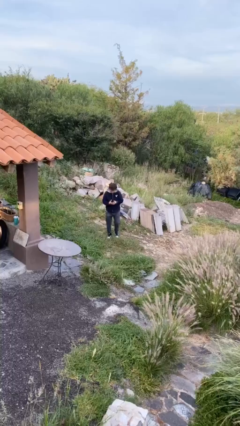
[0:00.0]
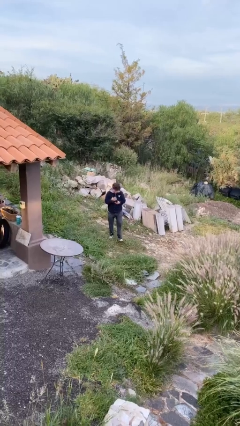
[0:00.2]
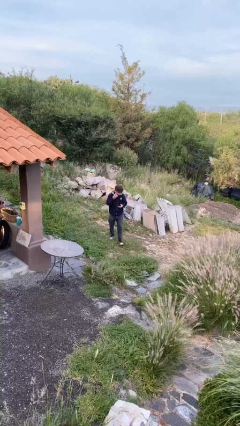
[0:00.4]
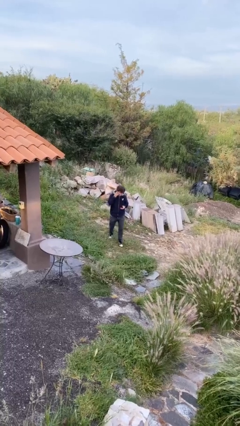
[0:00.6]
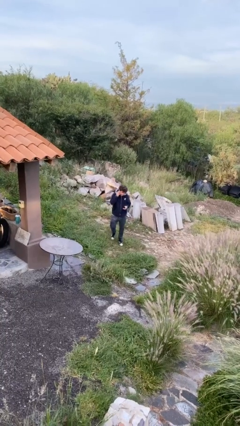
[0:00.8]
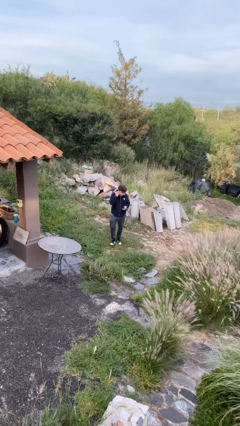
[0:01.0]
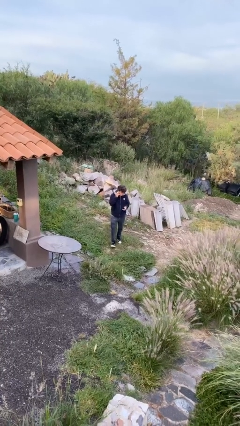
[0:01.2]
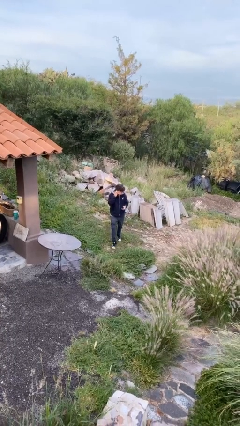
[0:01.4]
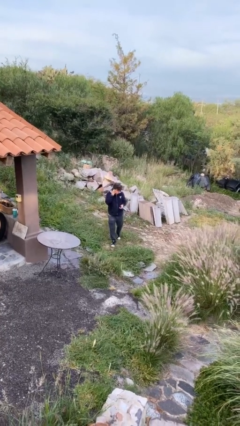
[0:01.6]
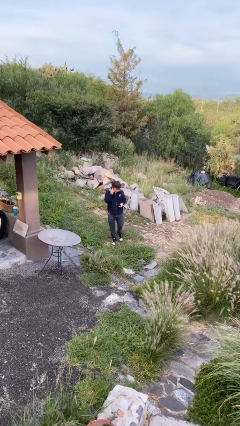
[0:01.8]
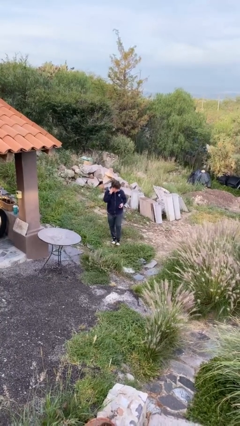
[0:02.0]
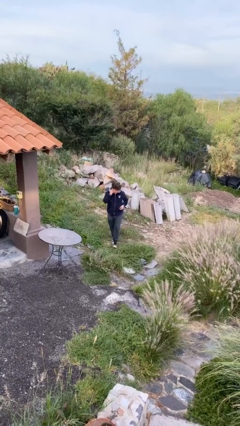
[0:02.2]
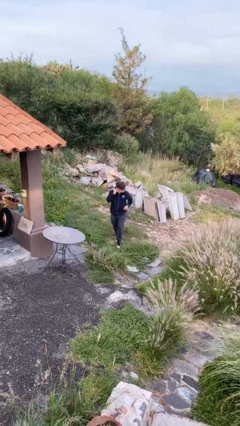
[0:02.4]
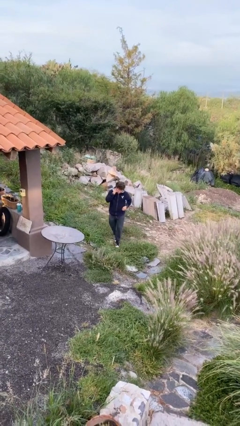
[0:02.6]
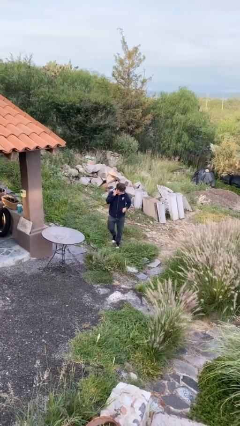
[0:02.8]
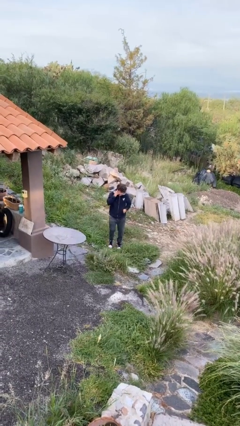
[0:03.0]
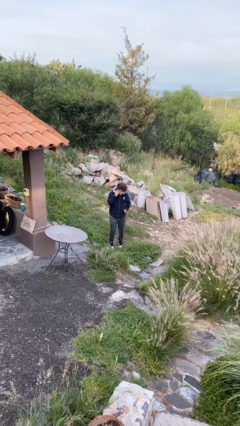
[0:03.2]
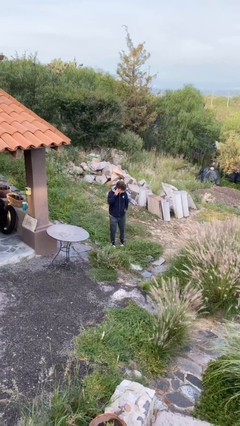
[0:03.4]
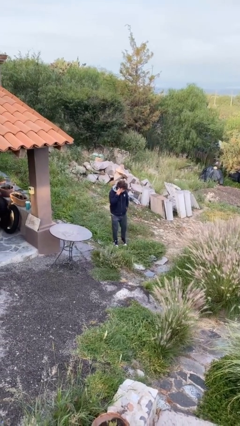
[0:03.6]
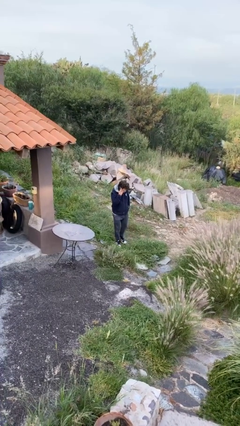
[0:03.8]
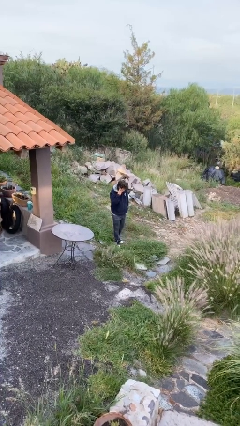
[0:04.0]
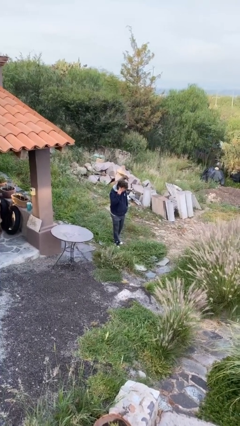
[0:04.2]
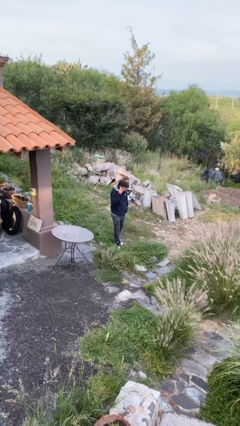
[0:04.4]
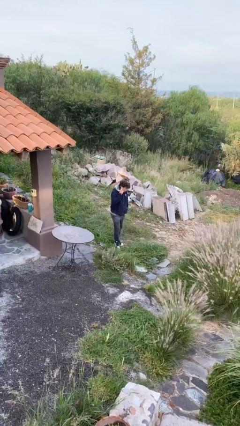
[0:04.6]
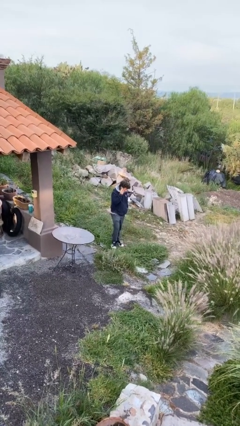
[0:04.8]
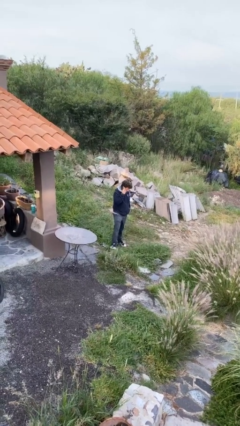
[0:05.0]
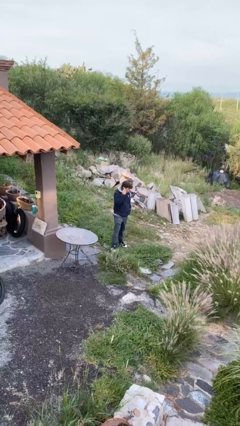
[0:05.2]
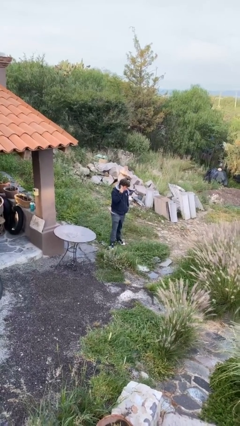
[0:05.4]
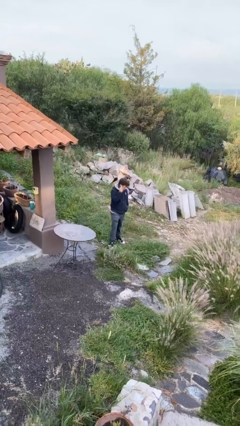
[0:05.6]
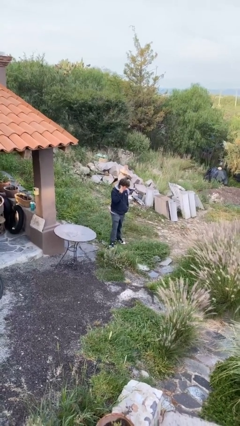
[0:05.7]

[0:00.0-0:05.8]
person talks on phone

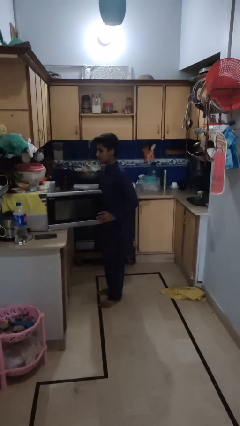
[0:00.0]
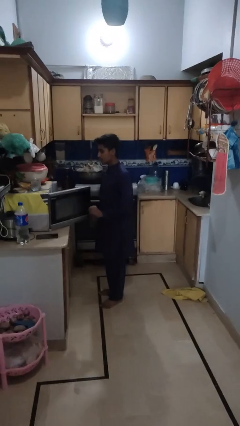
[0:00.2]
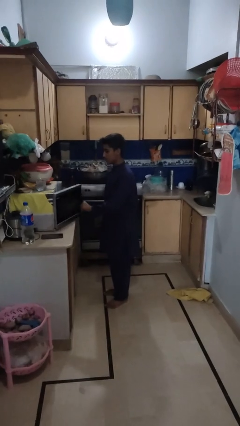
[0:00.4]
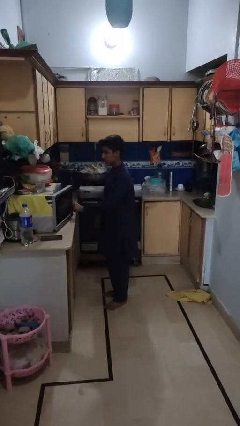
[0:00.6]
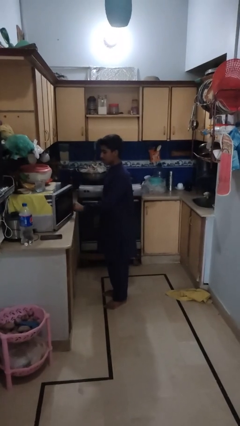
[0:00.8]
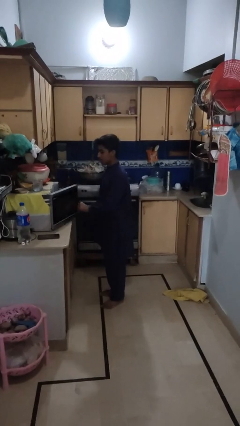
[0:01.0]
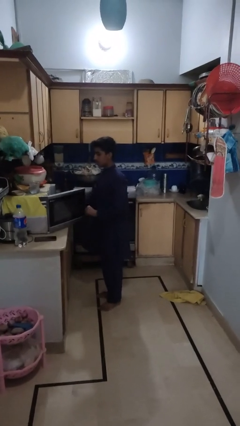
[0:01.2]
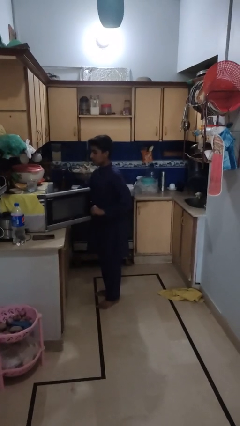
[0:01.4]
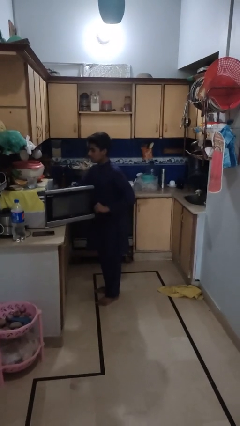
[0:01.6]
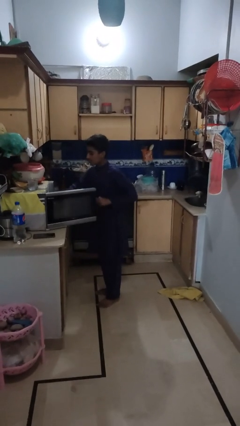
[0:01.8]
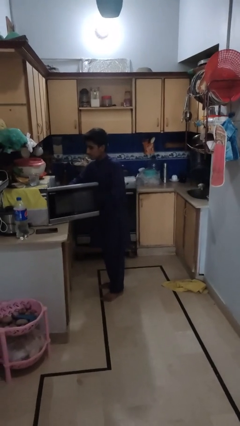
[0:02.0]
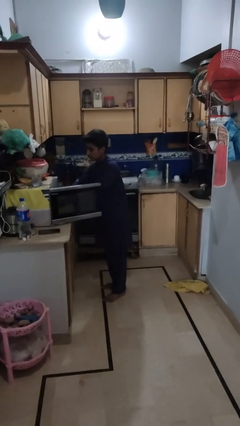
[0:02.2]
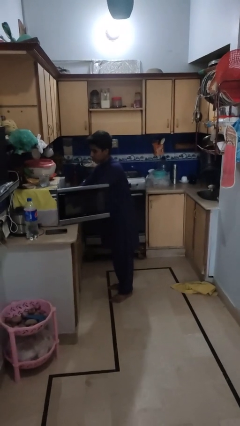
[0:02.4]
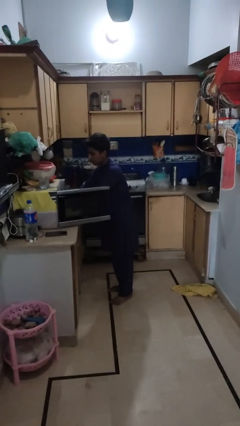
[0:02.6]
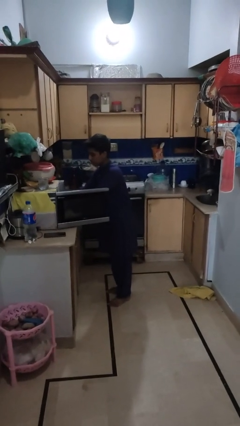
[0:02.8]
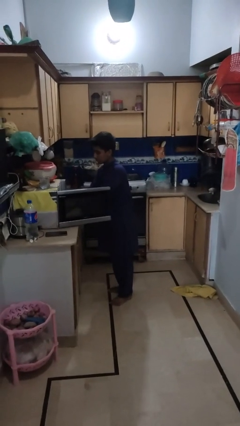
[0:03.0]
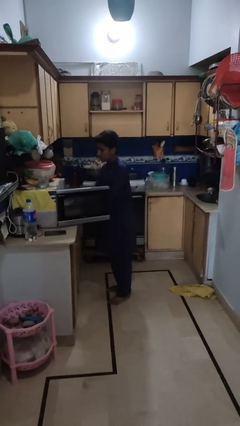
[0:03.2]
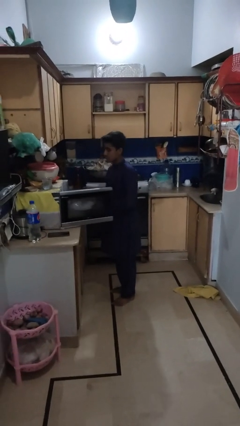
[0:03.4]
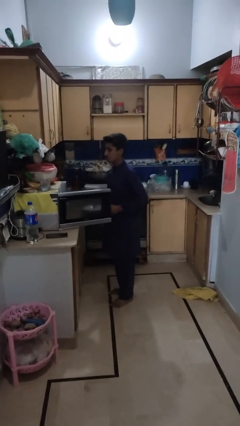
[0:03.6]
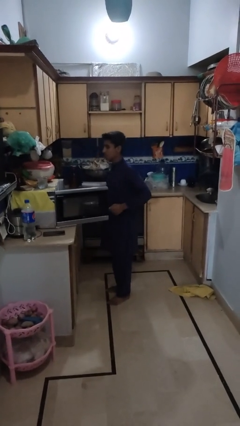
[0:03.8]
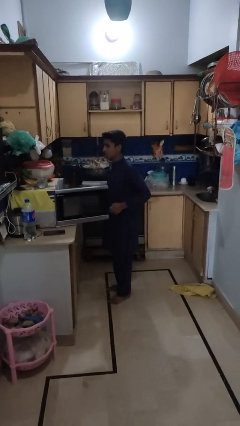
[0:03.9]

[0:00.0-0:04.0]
person takes object from microwave

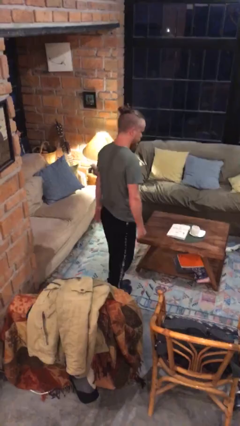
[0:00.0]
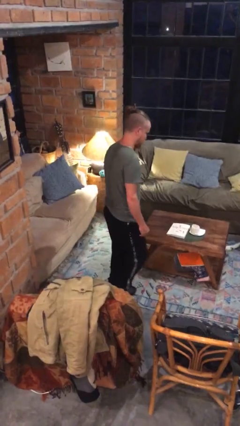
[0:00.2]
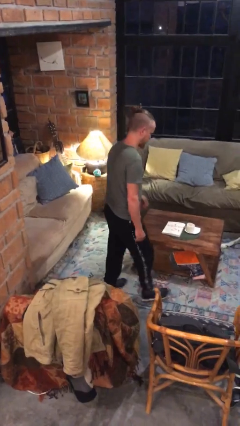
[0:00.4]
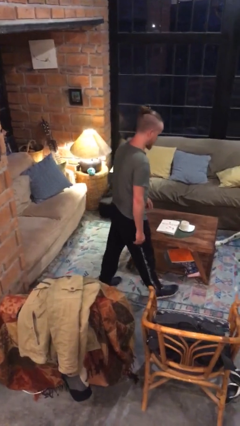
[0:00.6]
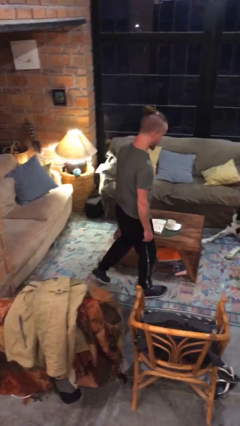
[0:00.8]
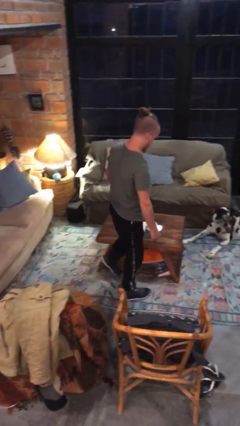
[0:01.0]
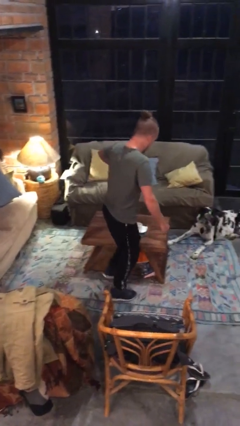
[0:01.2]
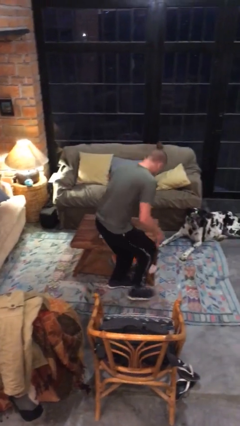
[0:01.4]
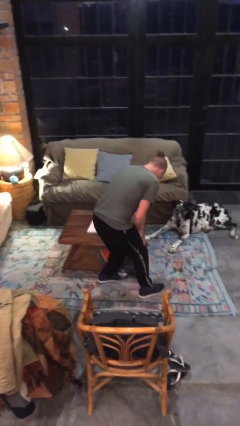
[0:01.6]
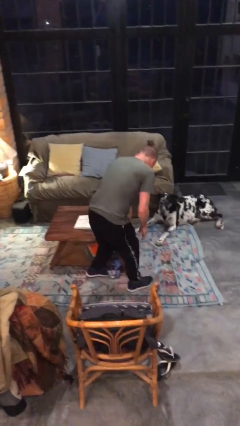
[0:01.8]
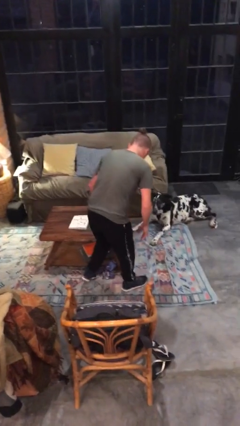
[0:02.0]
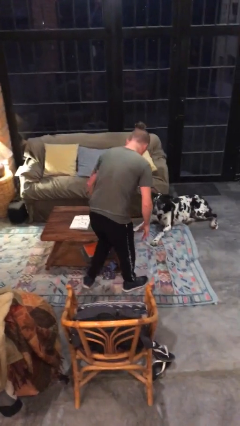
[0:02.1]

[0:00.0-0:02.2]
person bumps into table

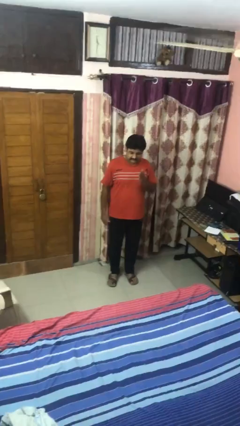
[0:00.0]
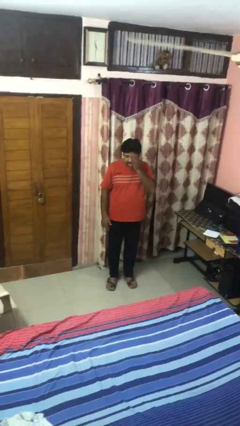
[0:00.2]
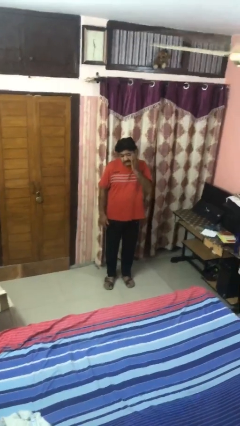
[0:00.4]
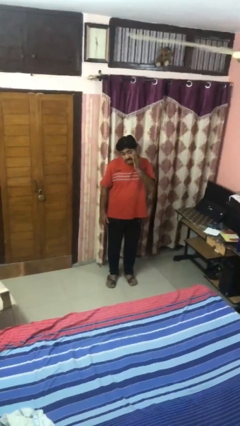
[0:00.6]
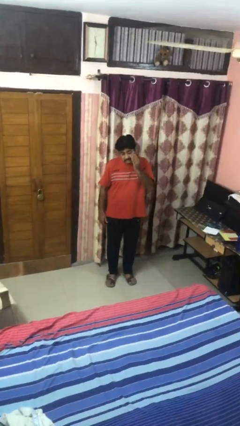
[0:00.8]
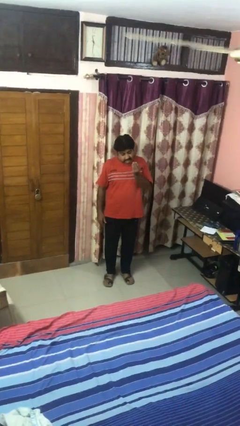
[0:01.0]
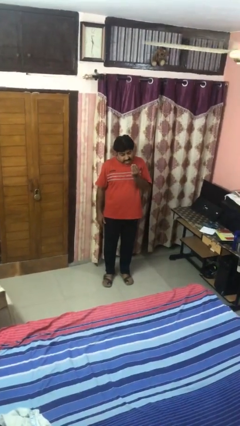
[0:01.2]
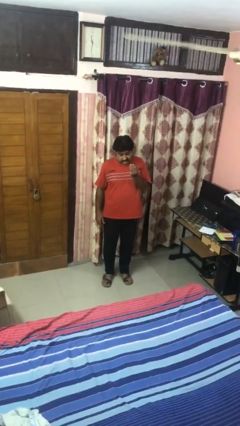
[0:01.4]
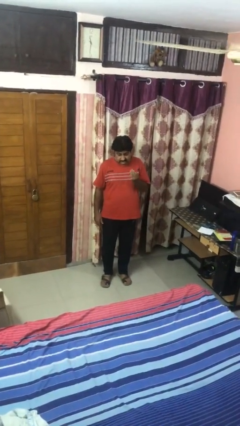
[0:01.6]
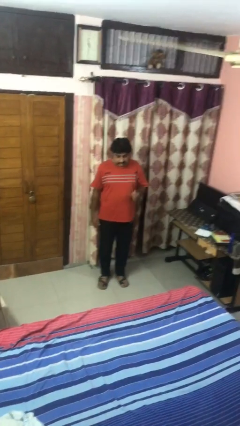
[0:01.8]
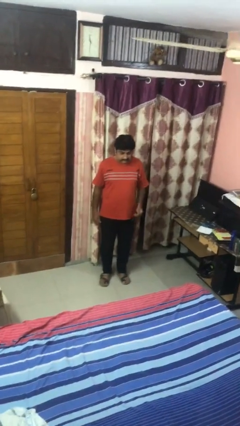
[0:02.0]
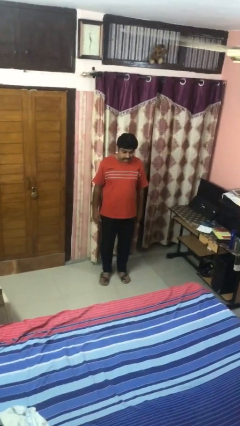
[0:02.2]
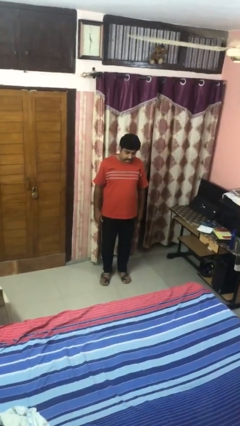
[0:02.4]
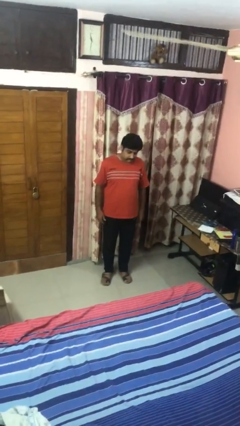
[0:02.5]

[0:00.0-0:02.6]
person swats bug

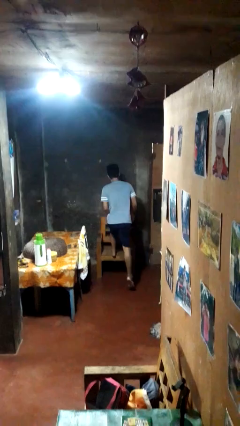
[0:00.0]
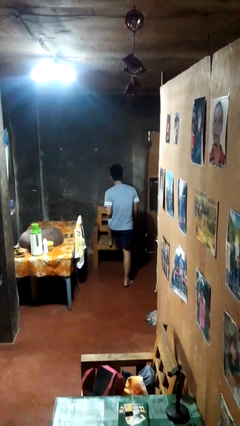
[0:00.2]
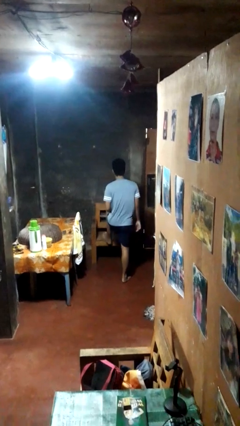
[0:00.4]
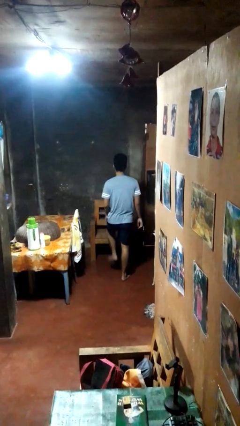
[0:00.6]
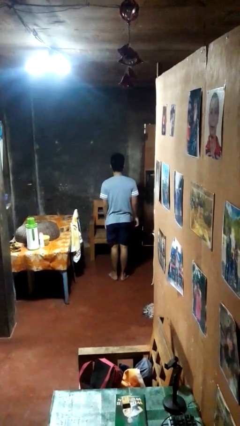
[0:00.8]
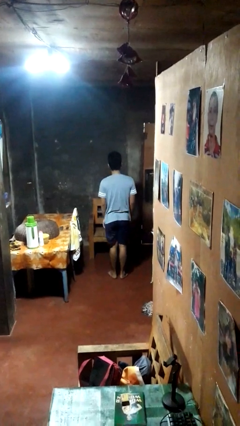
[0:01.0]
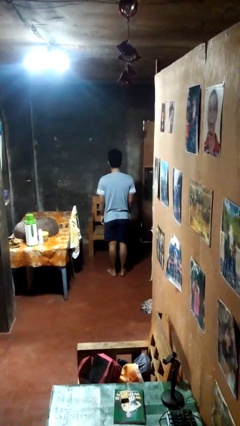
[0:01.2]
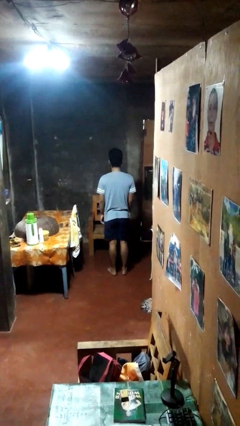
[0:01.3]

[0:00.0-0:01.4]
person climbs off chair

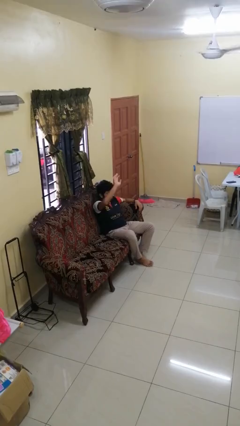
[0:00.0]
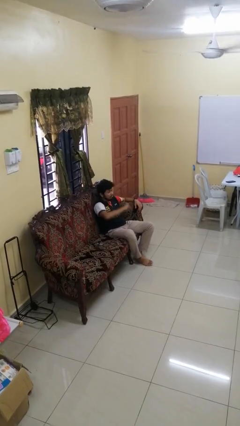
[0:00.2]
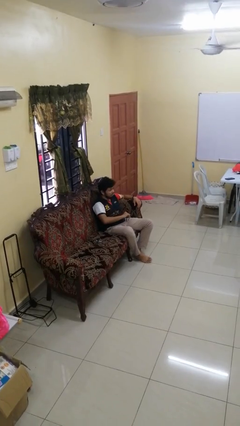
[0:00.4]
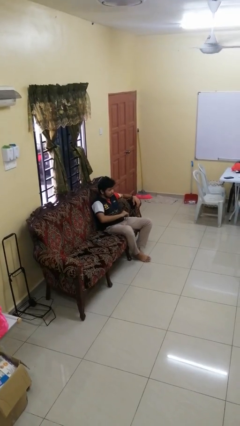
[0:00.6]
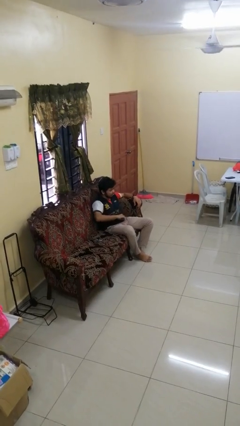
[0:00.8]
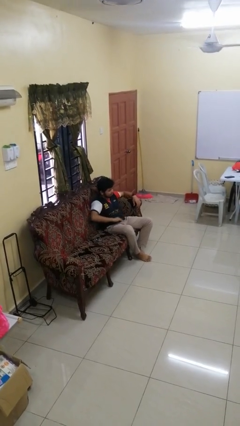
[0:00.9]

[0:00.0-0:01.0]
person gestures swipe down

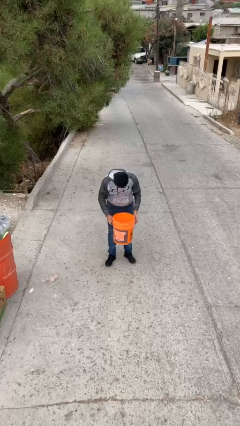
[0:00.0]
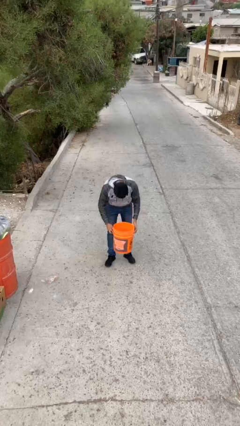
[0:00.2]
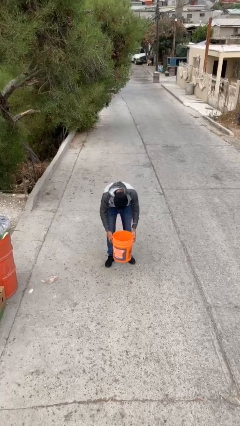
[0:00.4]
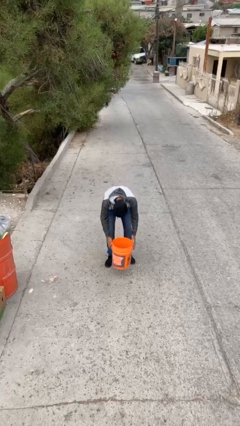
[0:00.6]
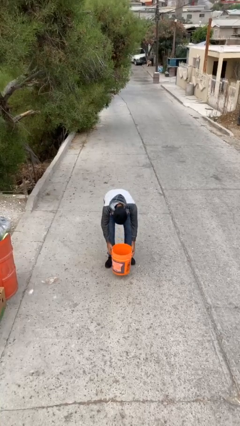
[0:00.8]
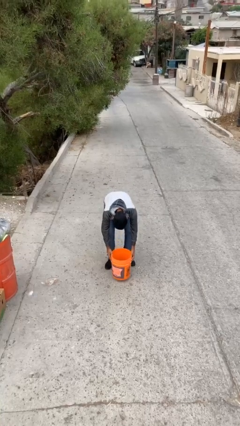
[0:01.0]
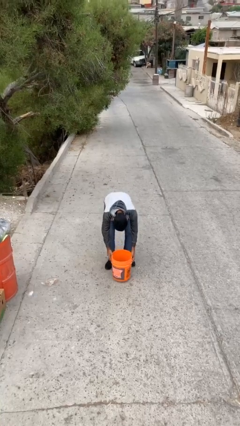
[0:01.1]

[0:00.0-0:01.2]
person puts down object on floor
